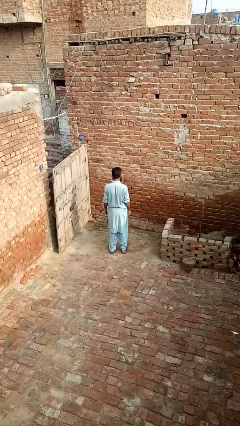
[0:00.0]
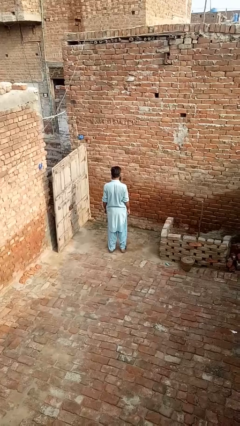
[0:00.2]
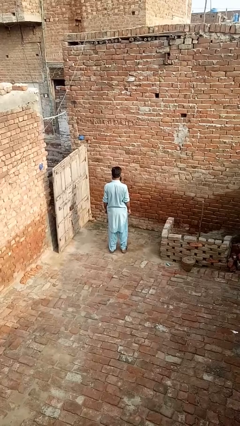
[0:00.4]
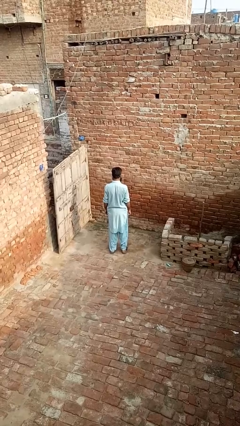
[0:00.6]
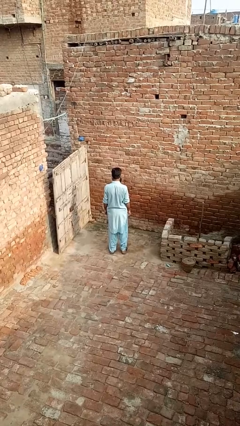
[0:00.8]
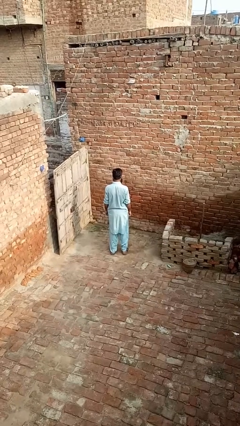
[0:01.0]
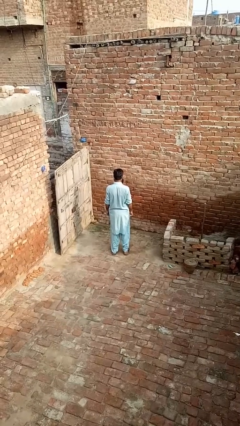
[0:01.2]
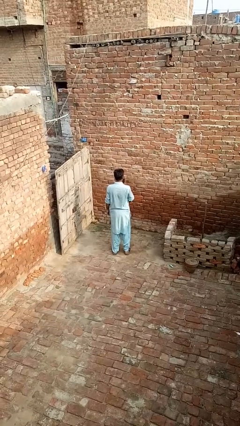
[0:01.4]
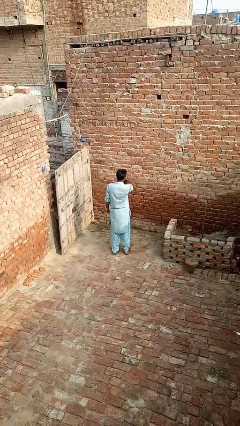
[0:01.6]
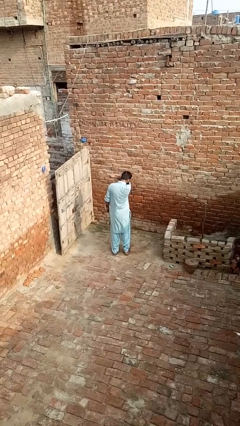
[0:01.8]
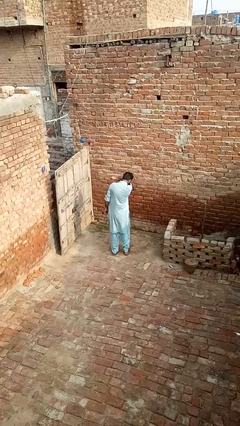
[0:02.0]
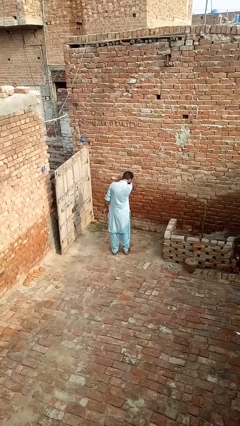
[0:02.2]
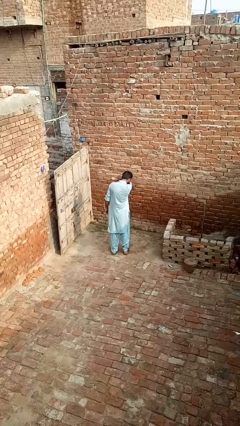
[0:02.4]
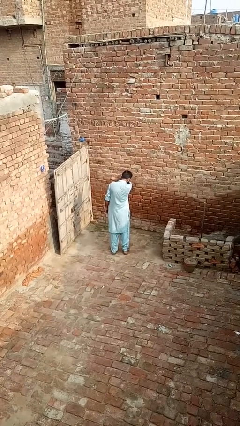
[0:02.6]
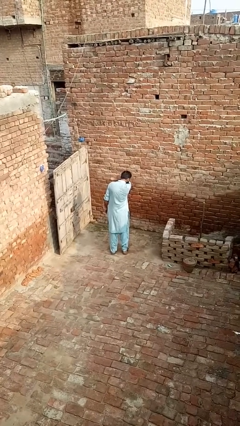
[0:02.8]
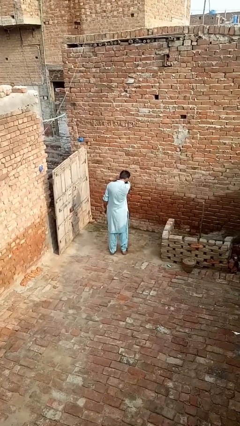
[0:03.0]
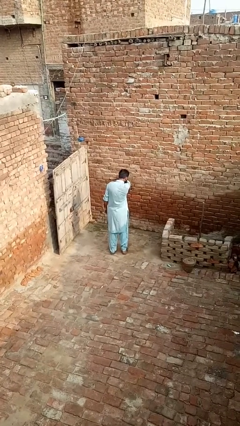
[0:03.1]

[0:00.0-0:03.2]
person sneezes into arm

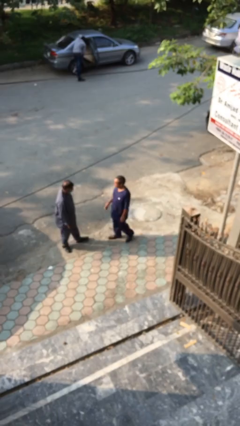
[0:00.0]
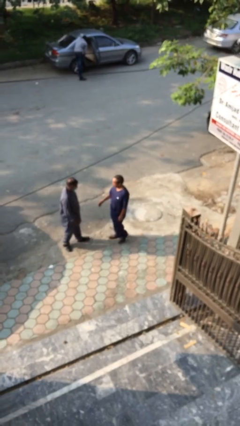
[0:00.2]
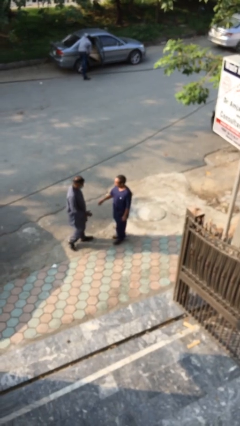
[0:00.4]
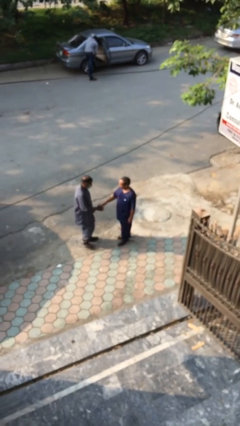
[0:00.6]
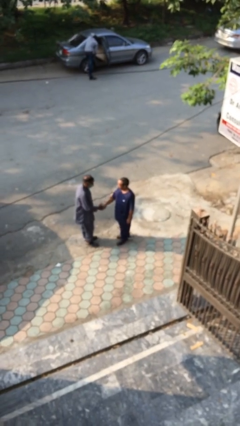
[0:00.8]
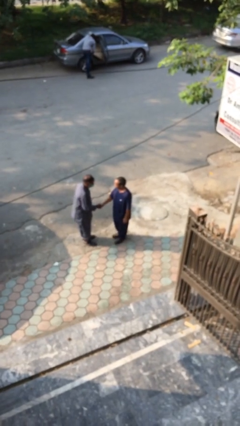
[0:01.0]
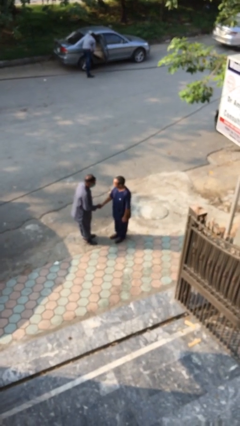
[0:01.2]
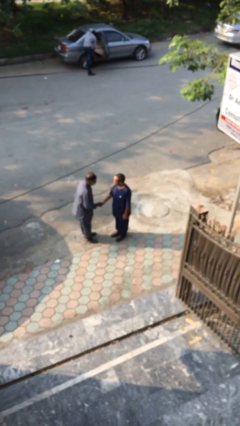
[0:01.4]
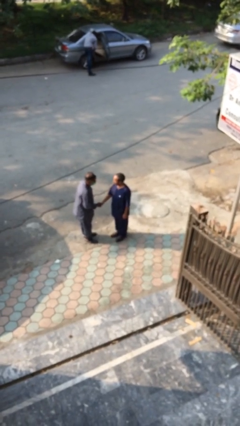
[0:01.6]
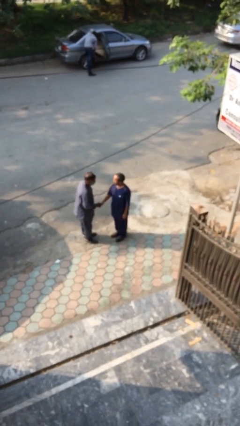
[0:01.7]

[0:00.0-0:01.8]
person shakes hand

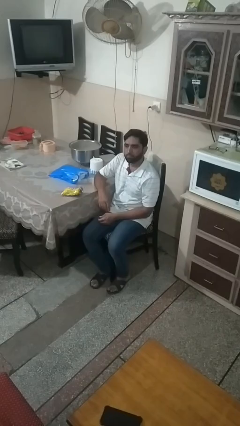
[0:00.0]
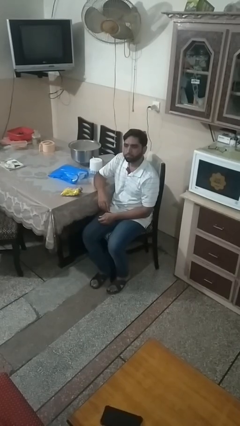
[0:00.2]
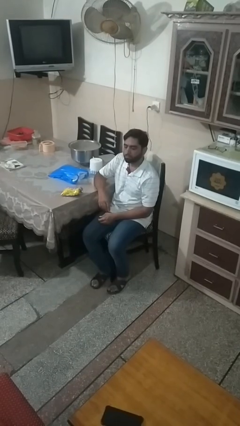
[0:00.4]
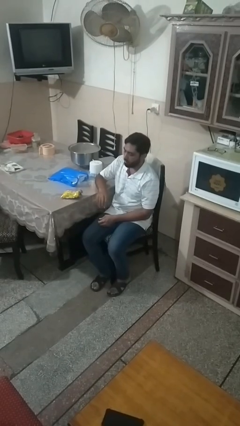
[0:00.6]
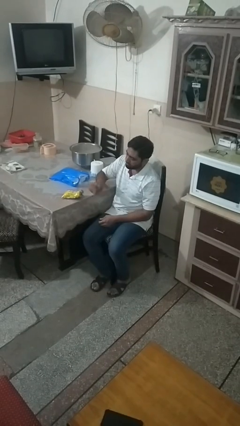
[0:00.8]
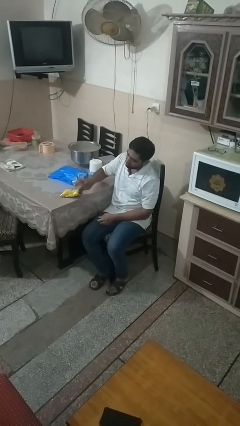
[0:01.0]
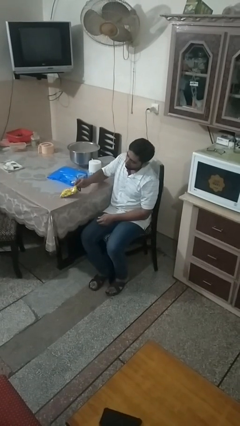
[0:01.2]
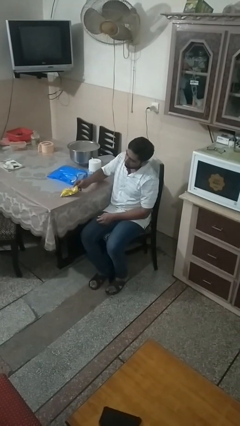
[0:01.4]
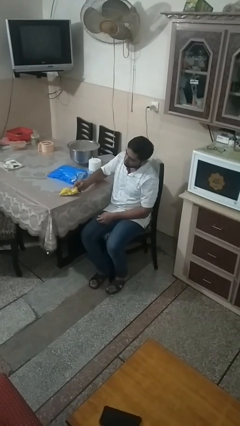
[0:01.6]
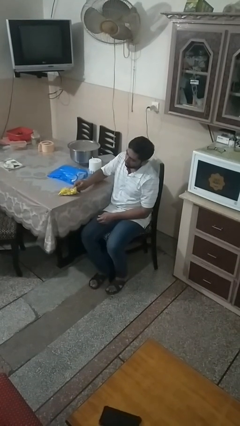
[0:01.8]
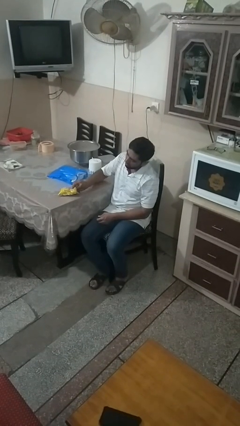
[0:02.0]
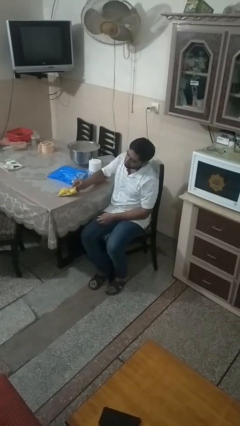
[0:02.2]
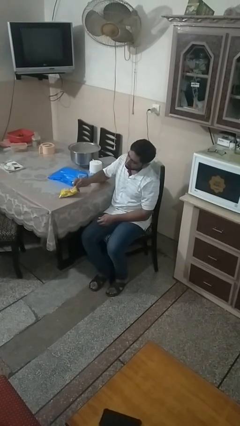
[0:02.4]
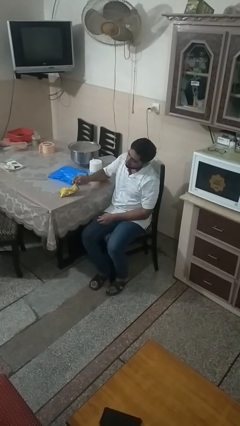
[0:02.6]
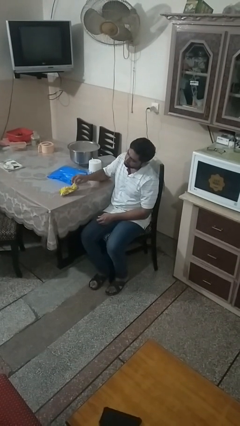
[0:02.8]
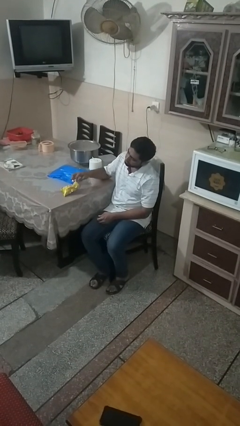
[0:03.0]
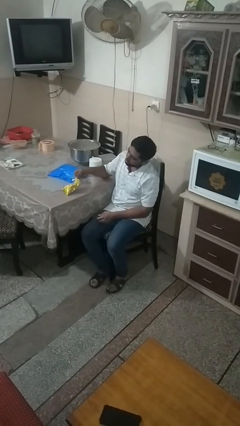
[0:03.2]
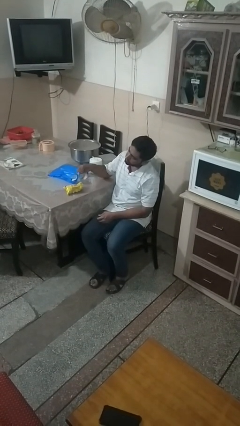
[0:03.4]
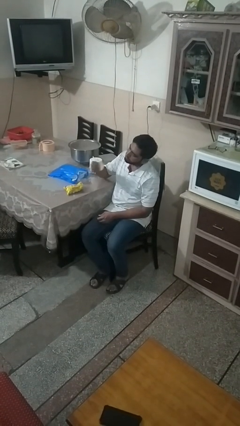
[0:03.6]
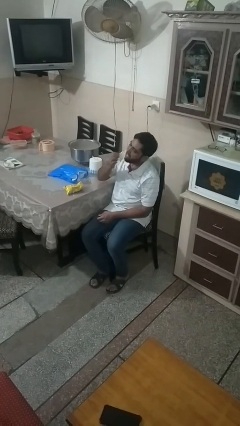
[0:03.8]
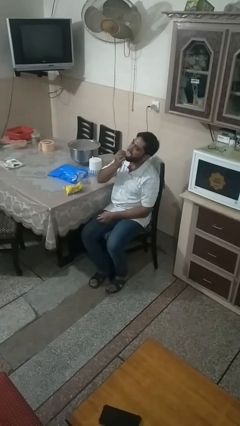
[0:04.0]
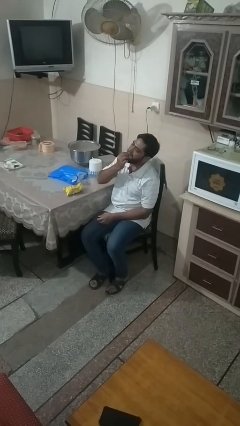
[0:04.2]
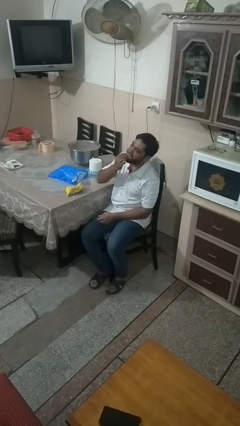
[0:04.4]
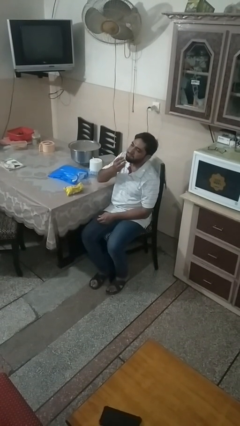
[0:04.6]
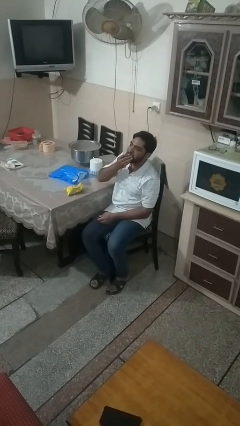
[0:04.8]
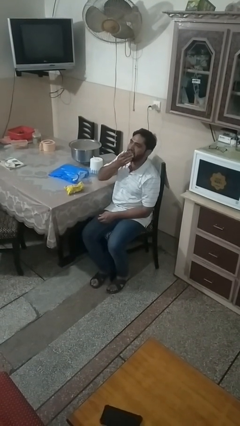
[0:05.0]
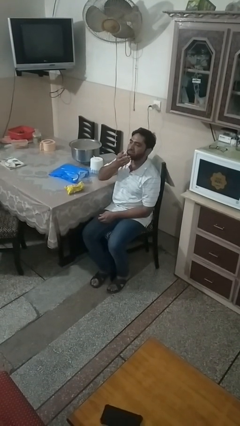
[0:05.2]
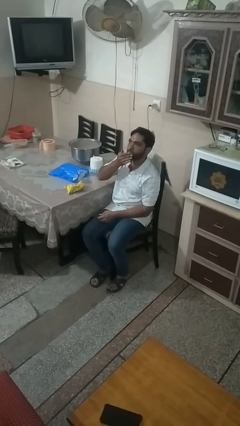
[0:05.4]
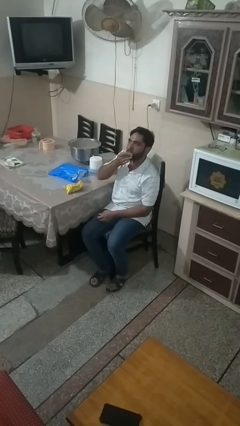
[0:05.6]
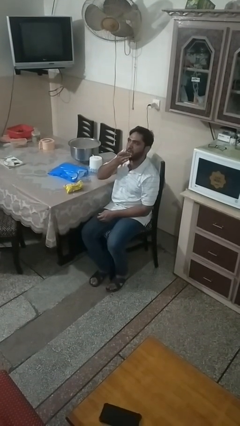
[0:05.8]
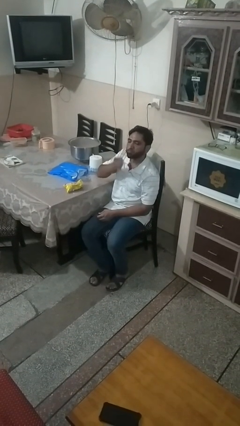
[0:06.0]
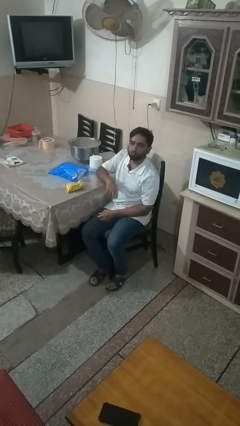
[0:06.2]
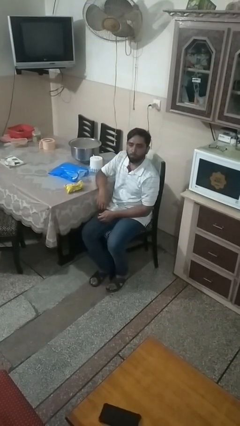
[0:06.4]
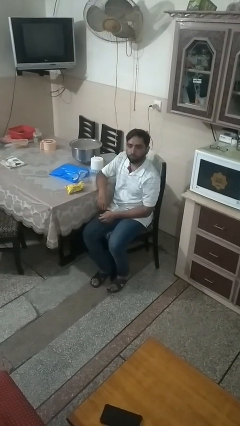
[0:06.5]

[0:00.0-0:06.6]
person eats snack from bag

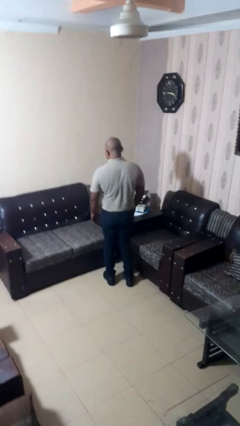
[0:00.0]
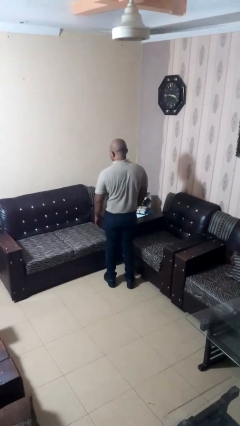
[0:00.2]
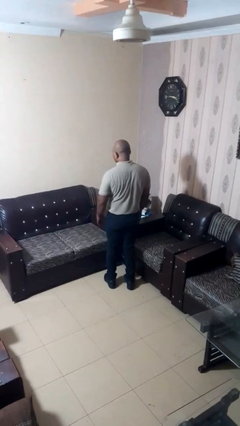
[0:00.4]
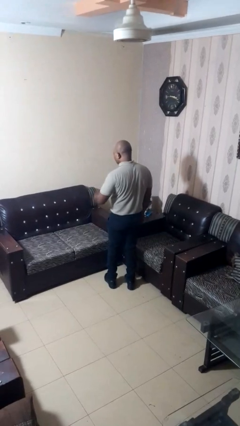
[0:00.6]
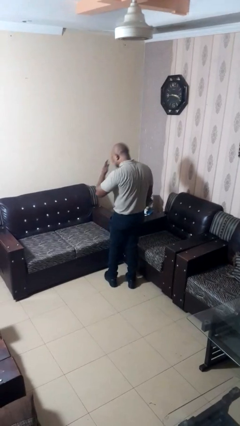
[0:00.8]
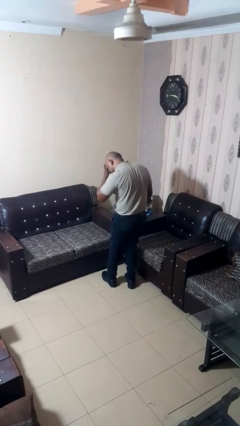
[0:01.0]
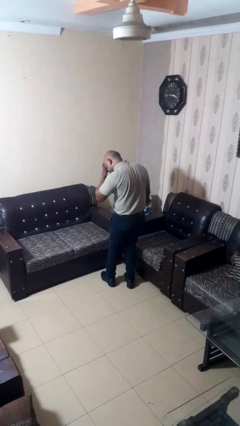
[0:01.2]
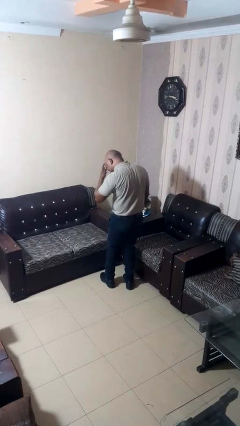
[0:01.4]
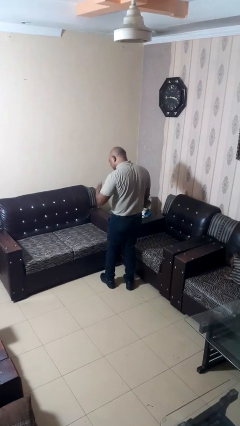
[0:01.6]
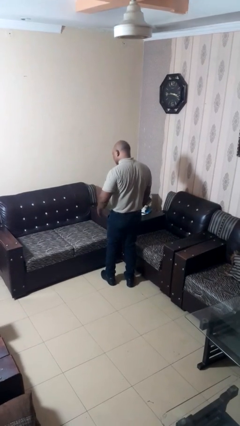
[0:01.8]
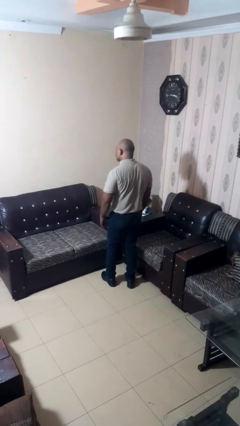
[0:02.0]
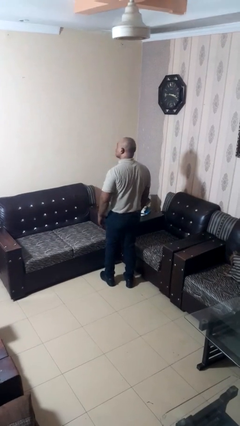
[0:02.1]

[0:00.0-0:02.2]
person sneezes into hand

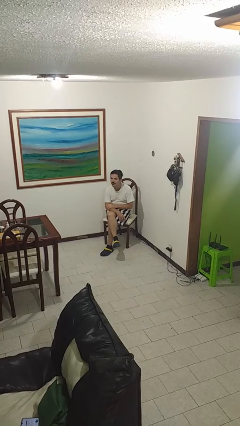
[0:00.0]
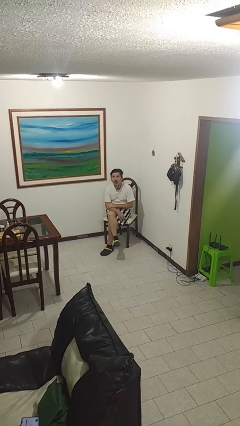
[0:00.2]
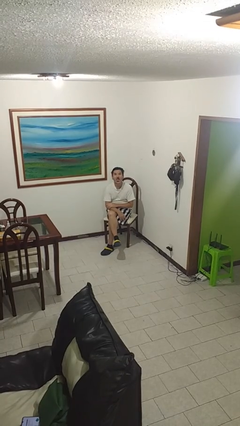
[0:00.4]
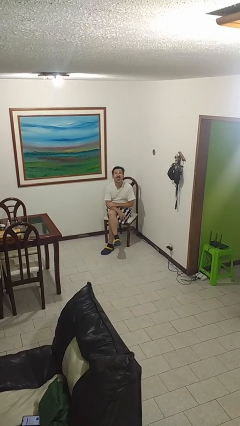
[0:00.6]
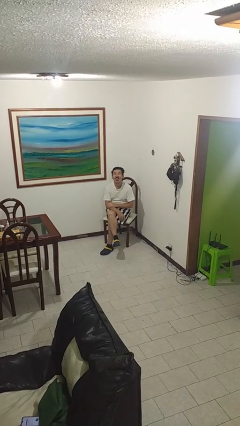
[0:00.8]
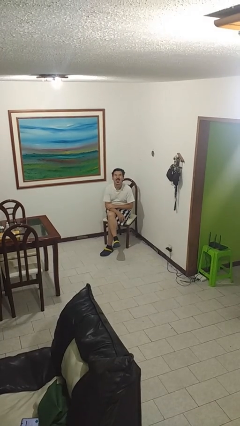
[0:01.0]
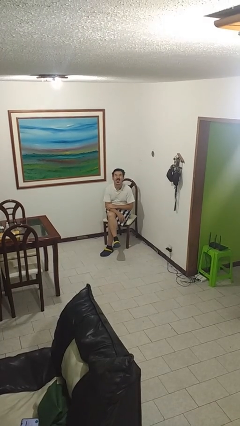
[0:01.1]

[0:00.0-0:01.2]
person sticks out tongue

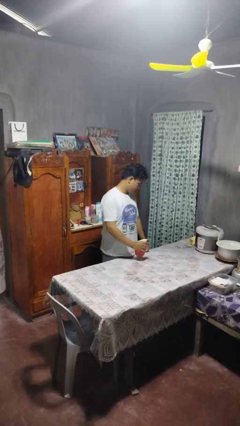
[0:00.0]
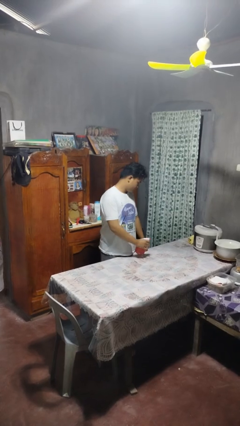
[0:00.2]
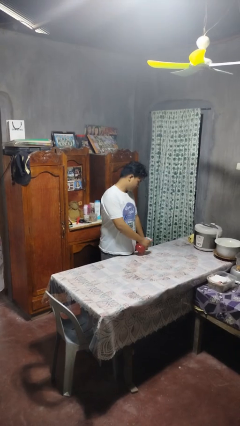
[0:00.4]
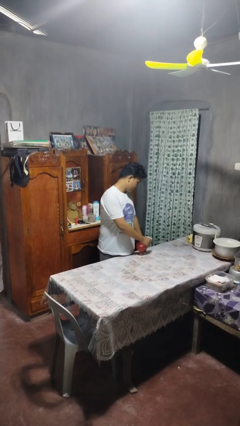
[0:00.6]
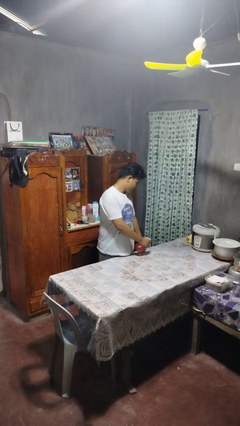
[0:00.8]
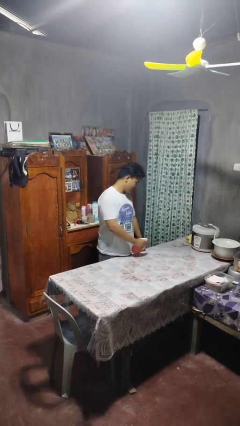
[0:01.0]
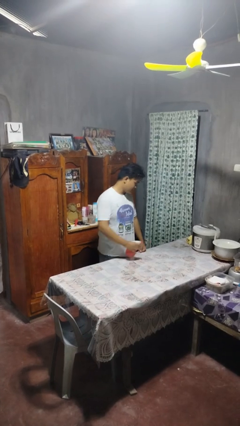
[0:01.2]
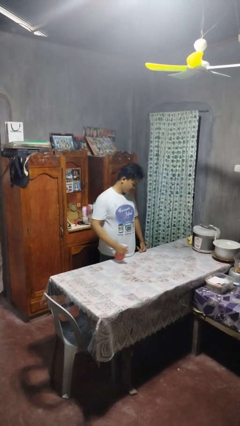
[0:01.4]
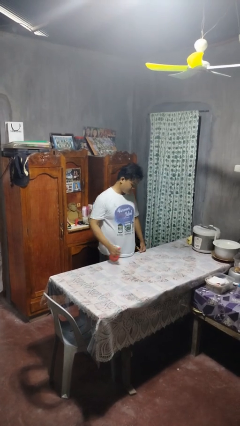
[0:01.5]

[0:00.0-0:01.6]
person sprays from bottle

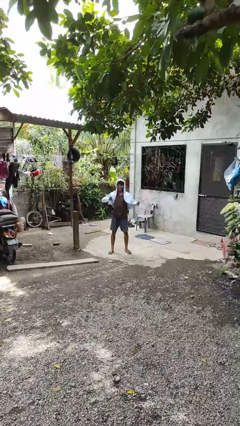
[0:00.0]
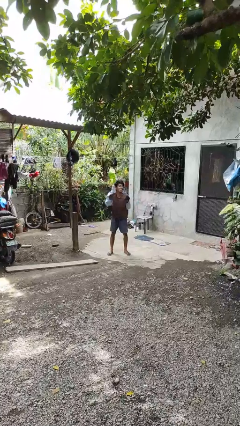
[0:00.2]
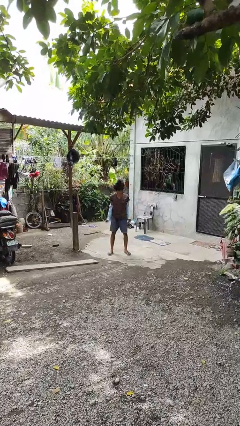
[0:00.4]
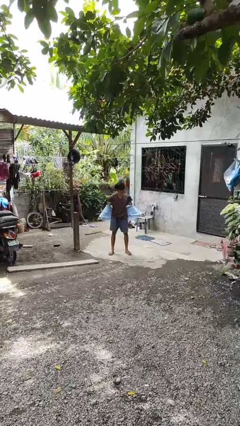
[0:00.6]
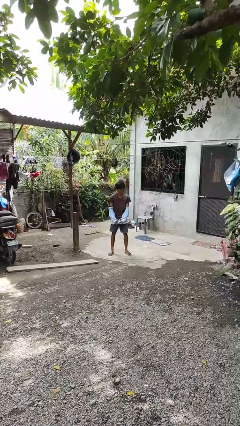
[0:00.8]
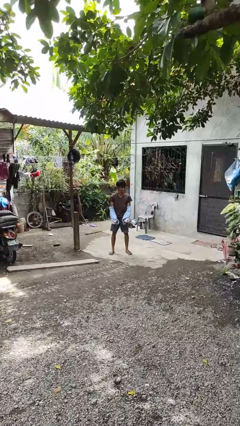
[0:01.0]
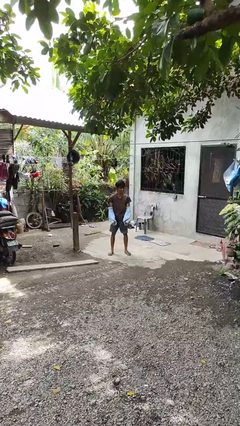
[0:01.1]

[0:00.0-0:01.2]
person takes off jacket
